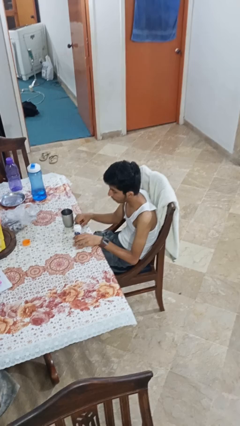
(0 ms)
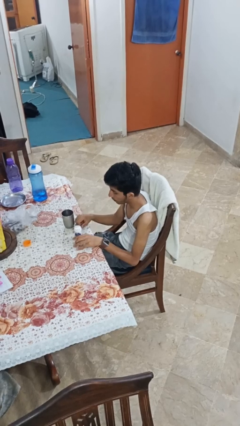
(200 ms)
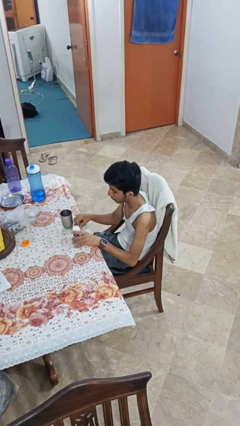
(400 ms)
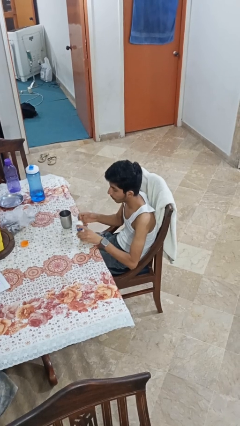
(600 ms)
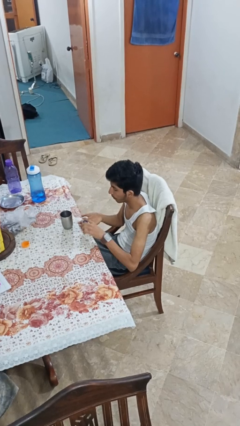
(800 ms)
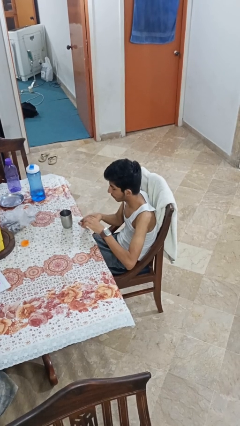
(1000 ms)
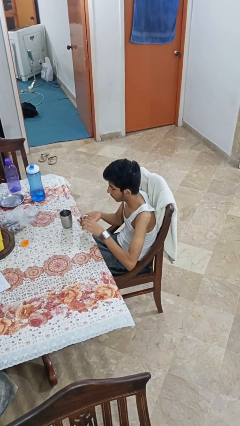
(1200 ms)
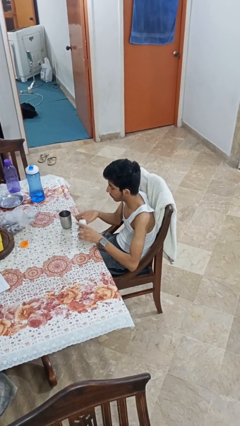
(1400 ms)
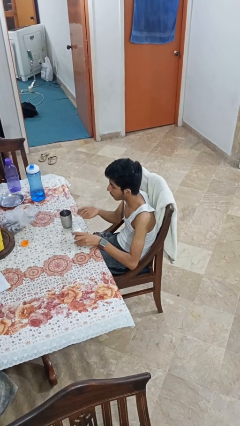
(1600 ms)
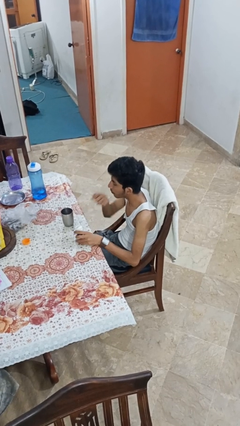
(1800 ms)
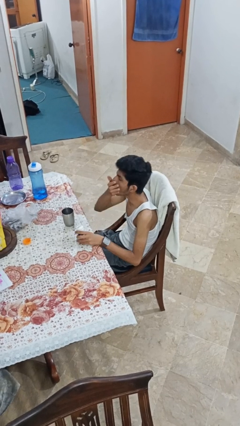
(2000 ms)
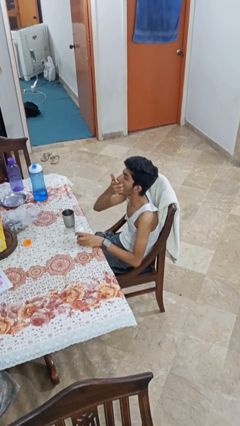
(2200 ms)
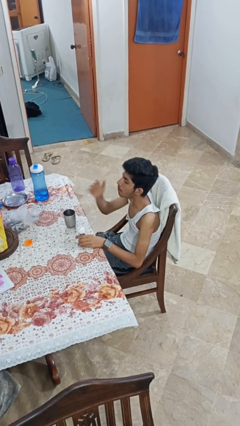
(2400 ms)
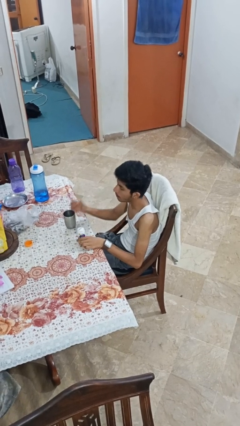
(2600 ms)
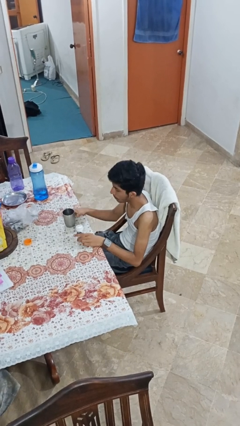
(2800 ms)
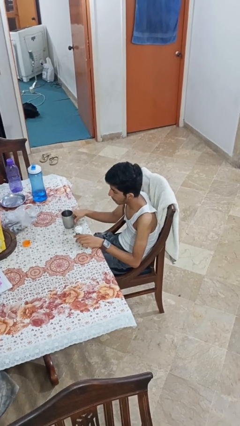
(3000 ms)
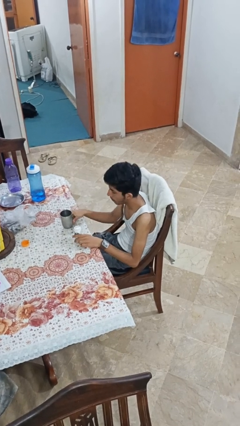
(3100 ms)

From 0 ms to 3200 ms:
person takes medicine pills

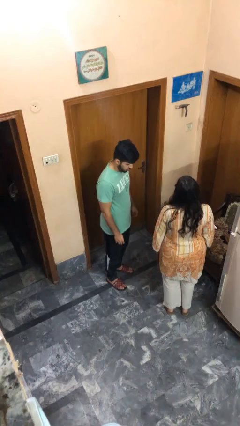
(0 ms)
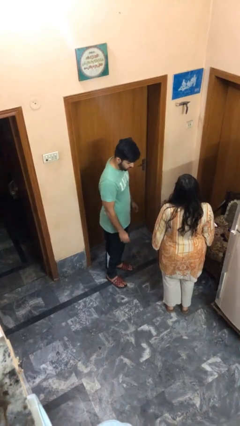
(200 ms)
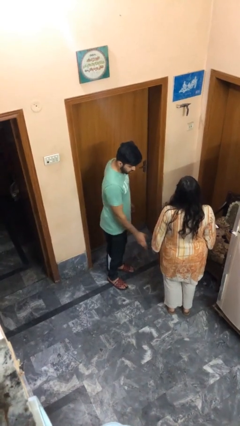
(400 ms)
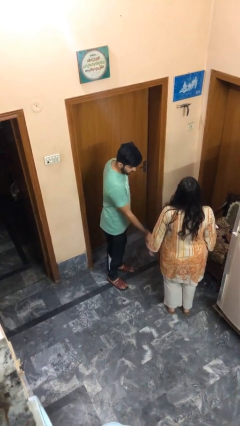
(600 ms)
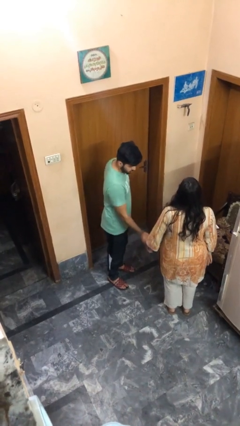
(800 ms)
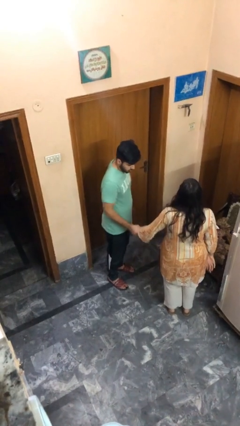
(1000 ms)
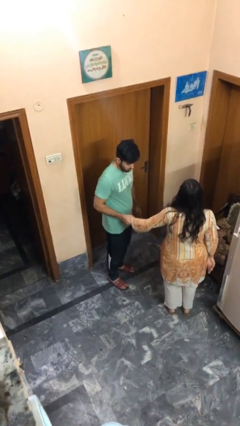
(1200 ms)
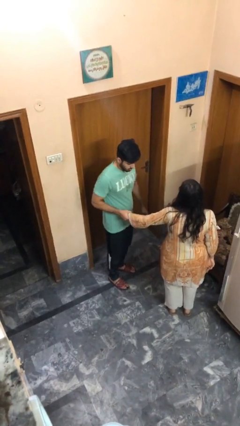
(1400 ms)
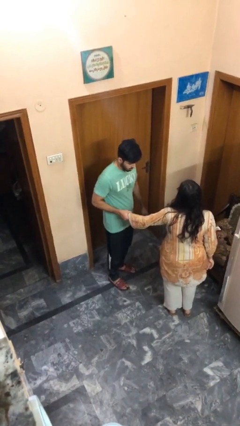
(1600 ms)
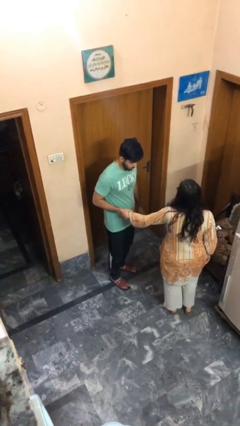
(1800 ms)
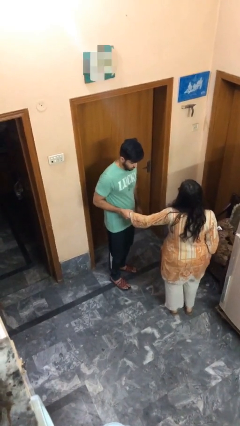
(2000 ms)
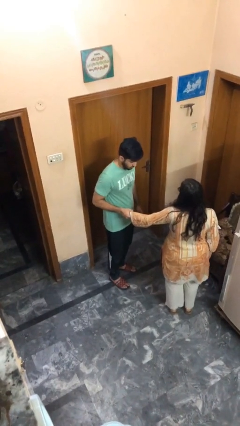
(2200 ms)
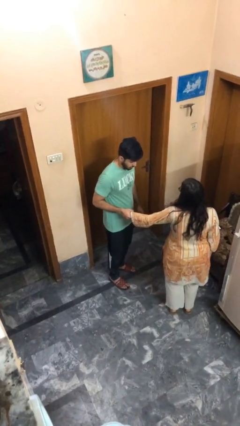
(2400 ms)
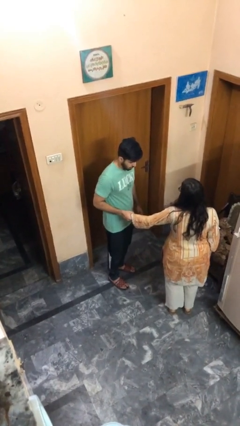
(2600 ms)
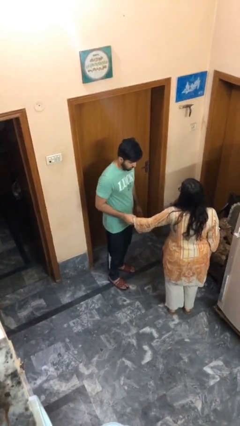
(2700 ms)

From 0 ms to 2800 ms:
person grabs person by forearm

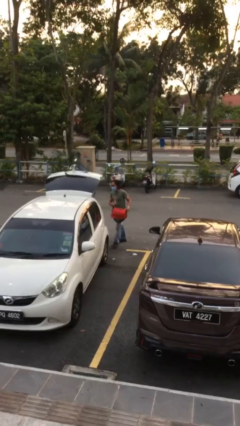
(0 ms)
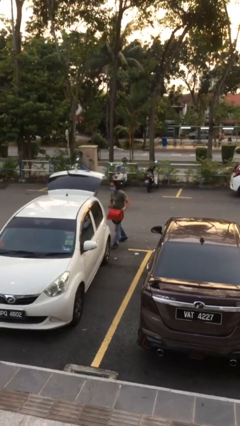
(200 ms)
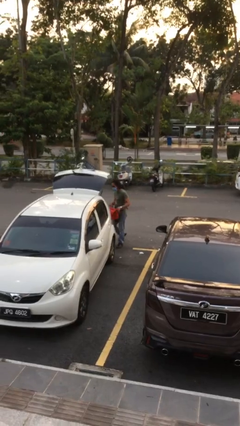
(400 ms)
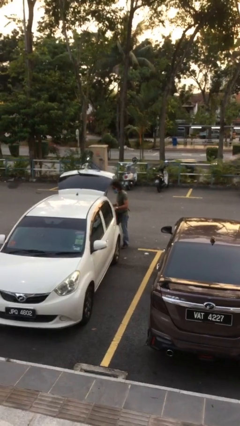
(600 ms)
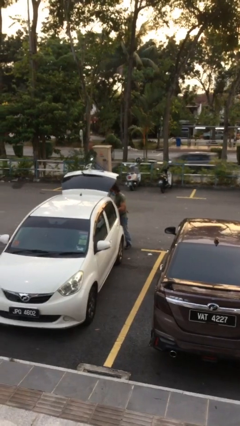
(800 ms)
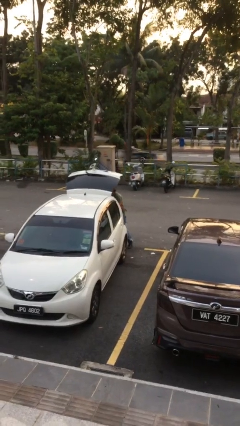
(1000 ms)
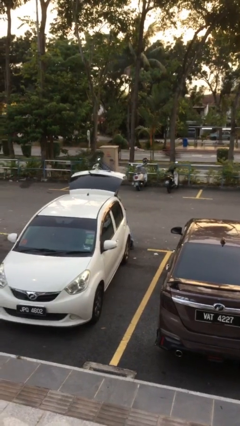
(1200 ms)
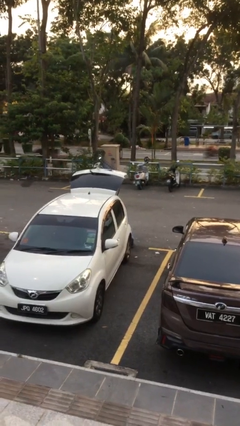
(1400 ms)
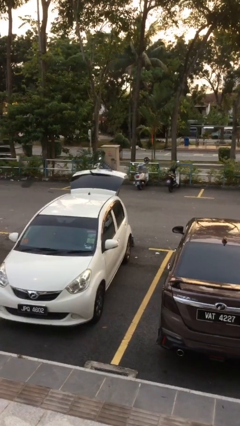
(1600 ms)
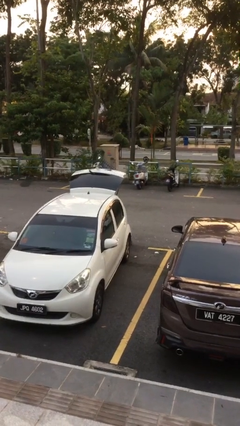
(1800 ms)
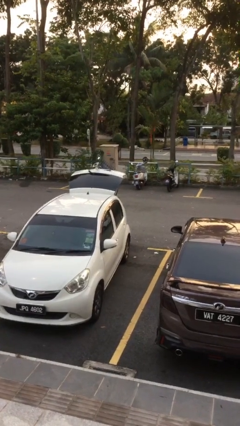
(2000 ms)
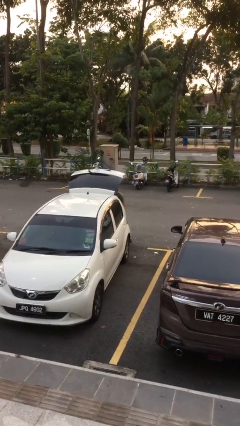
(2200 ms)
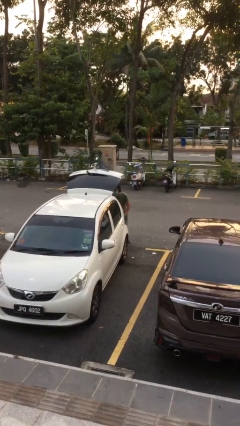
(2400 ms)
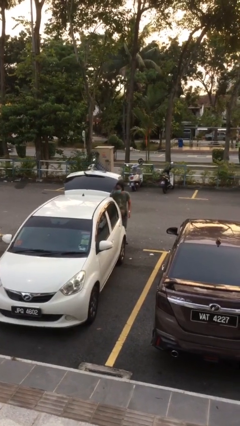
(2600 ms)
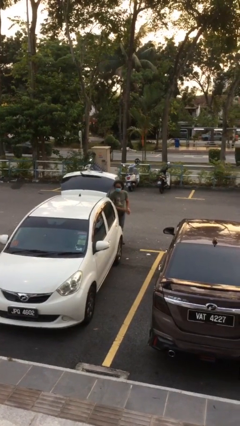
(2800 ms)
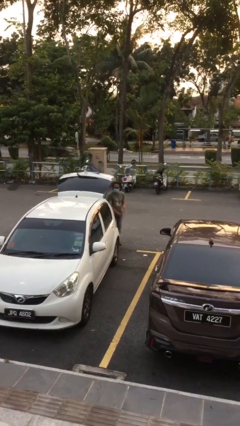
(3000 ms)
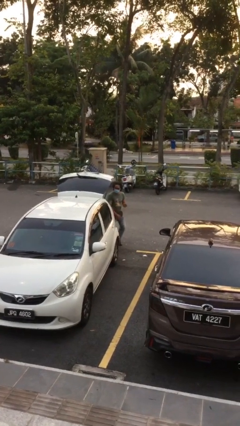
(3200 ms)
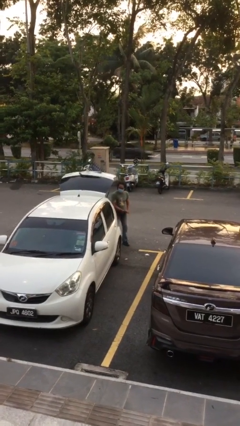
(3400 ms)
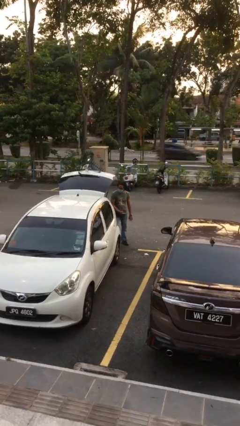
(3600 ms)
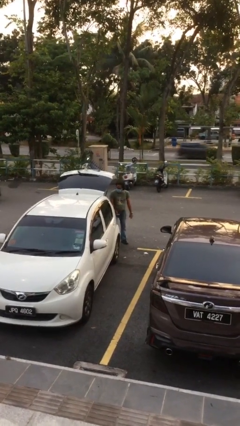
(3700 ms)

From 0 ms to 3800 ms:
person loads car

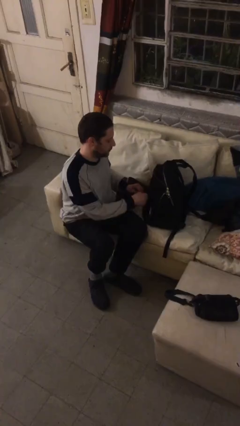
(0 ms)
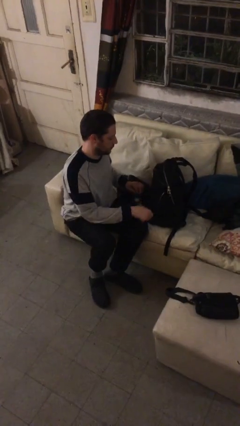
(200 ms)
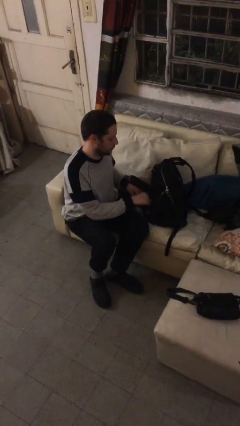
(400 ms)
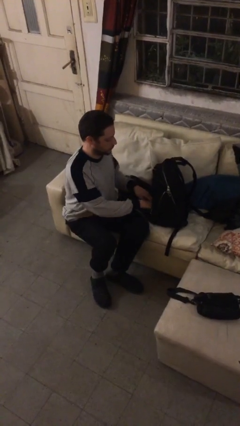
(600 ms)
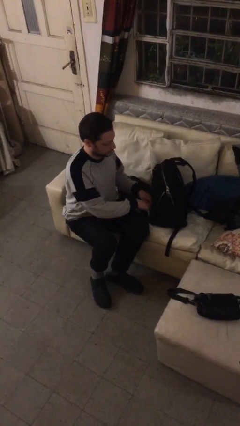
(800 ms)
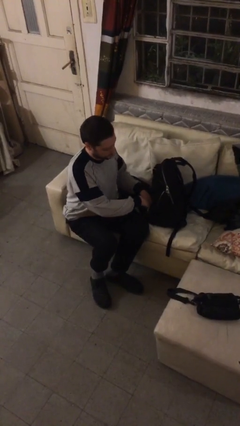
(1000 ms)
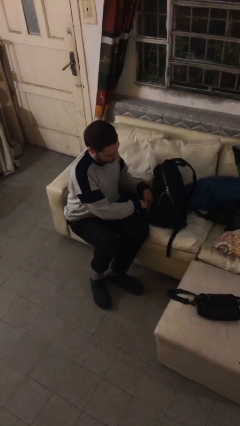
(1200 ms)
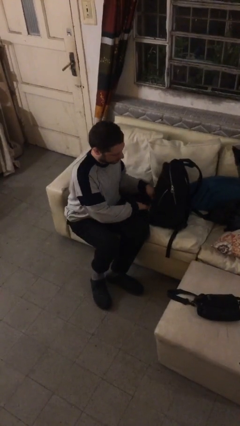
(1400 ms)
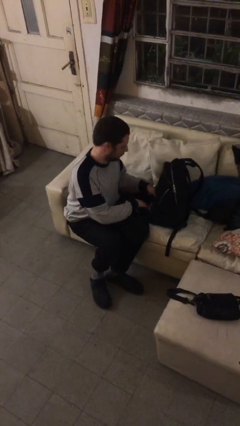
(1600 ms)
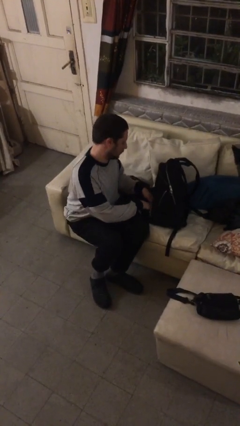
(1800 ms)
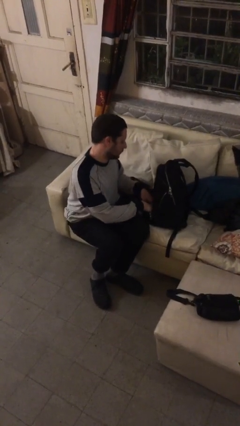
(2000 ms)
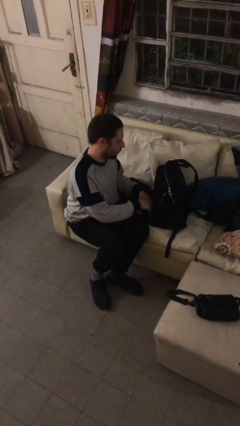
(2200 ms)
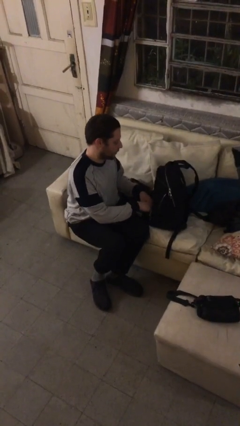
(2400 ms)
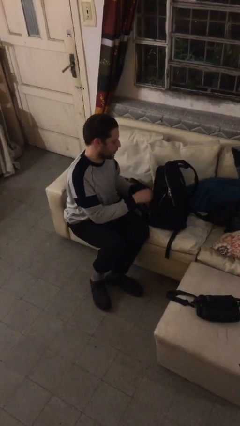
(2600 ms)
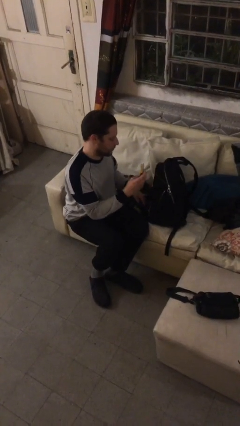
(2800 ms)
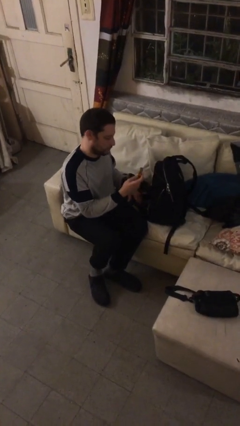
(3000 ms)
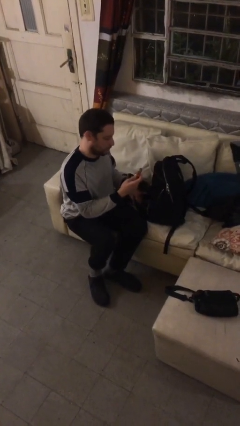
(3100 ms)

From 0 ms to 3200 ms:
person searches in backpack

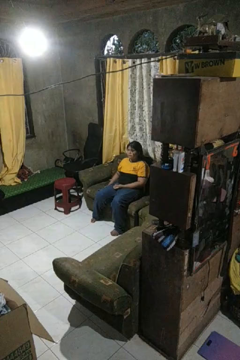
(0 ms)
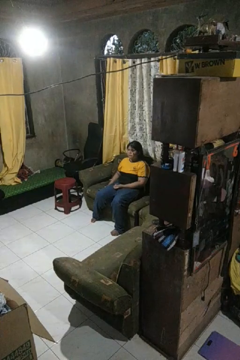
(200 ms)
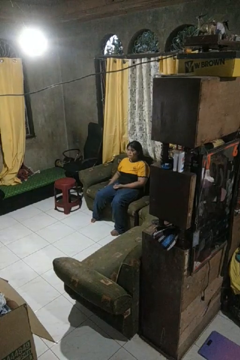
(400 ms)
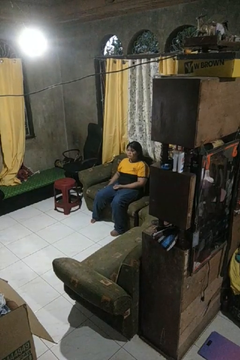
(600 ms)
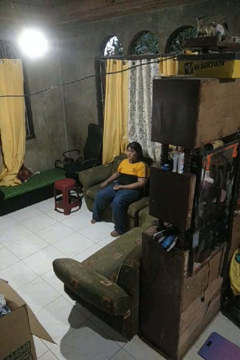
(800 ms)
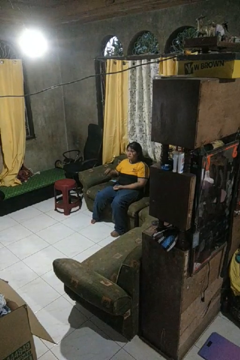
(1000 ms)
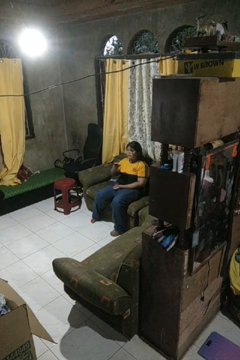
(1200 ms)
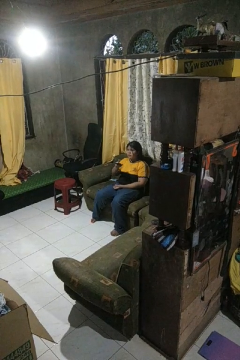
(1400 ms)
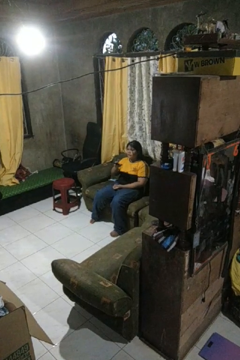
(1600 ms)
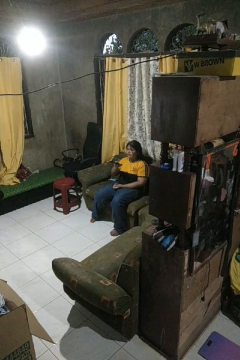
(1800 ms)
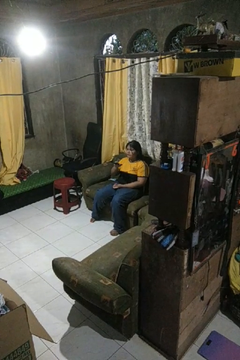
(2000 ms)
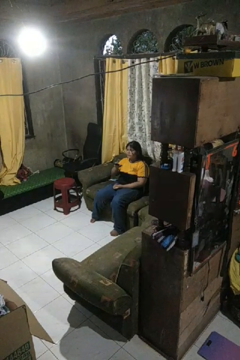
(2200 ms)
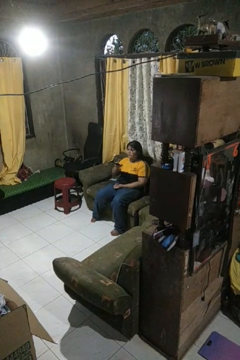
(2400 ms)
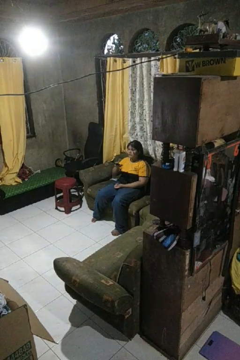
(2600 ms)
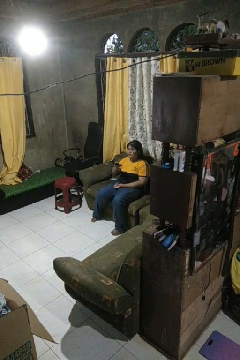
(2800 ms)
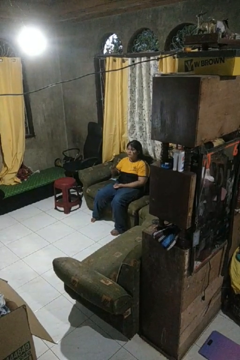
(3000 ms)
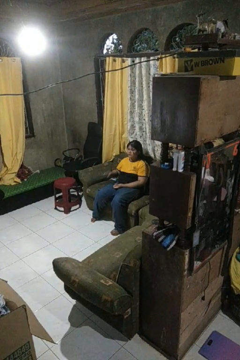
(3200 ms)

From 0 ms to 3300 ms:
person uses television remote

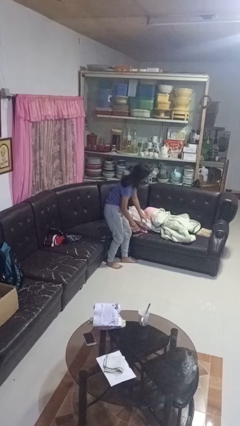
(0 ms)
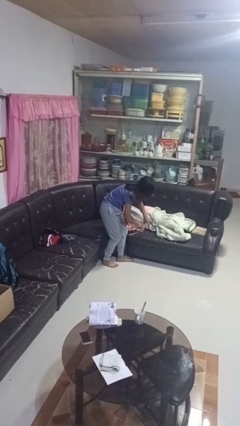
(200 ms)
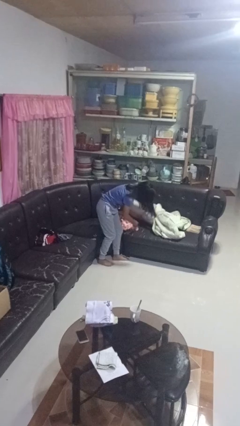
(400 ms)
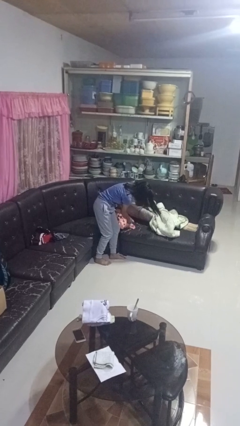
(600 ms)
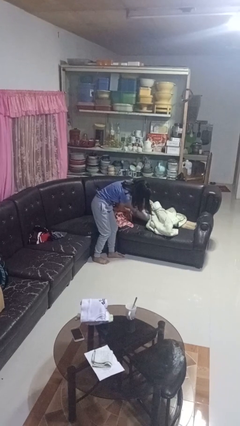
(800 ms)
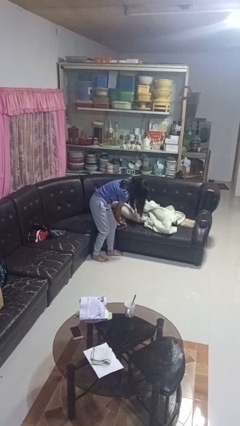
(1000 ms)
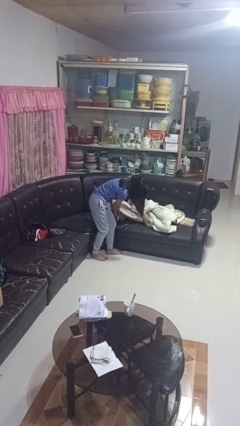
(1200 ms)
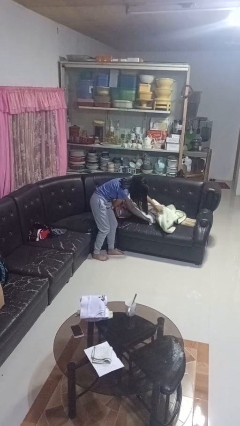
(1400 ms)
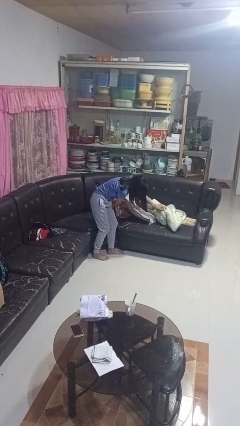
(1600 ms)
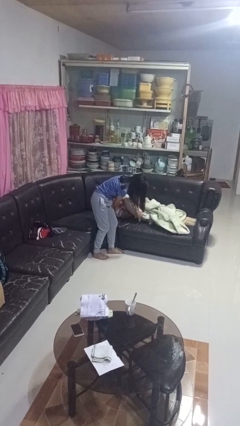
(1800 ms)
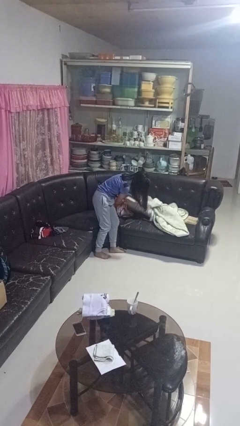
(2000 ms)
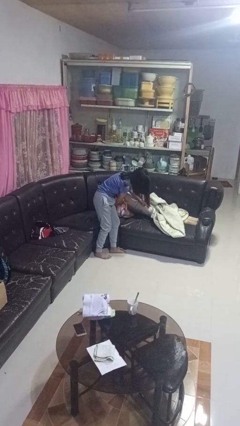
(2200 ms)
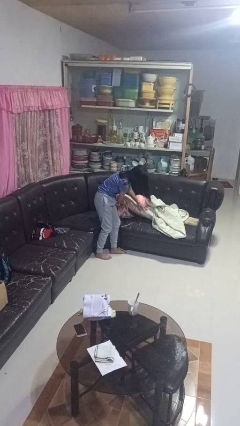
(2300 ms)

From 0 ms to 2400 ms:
person searches in couch
